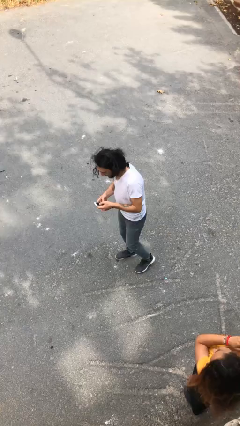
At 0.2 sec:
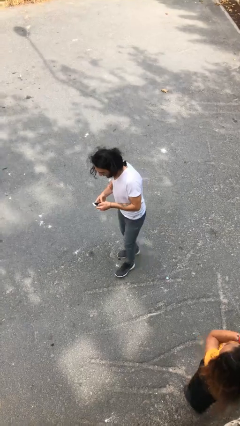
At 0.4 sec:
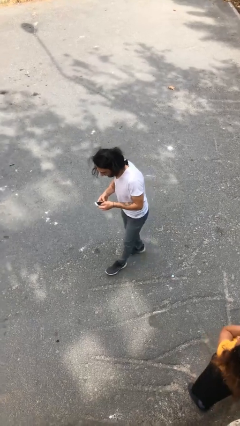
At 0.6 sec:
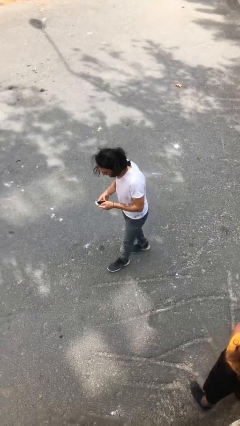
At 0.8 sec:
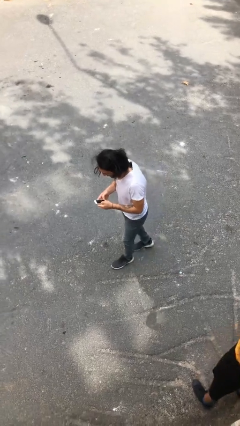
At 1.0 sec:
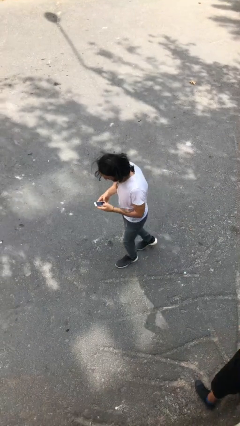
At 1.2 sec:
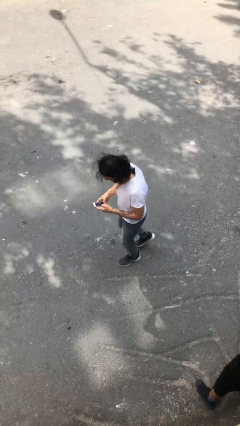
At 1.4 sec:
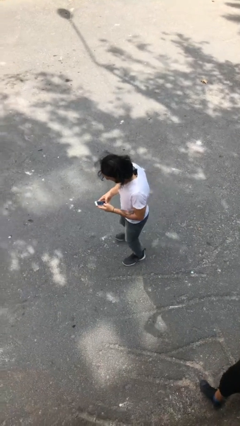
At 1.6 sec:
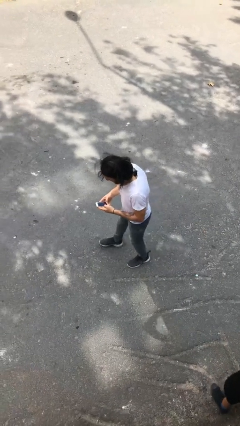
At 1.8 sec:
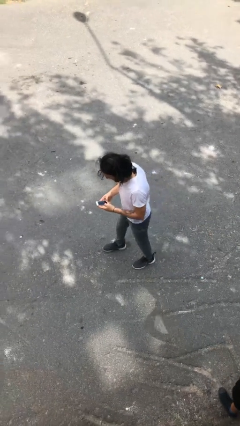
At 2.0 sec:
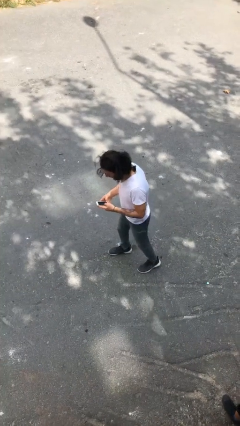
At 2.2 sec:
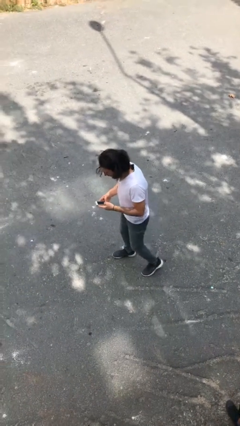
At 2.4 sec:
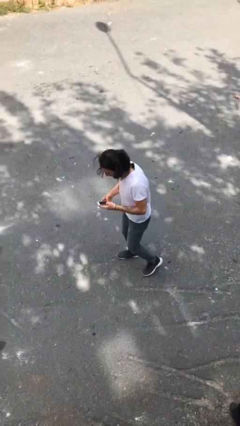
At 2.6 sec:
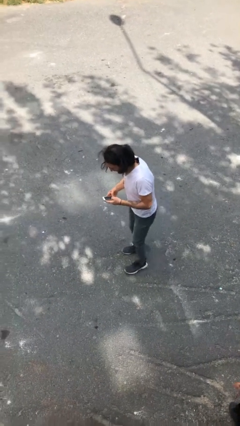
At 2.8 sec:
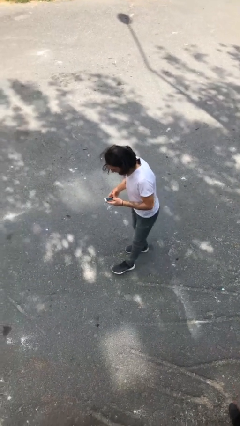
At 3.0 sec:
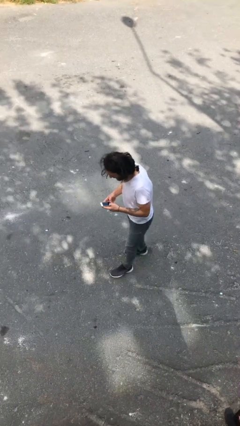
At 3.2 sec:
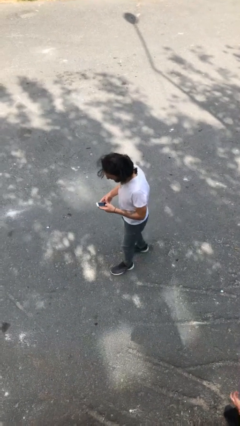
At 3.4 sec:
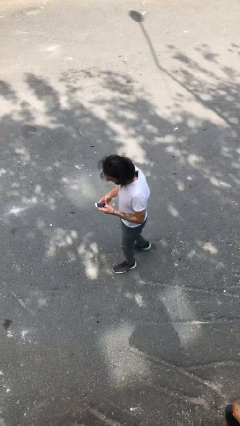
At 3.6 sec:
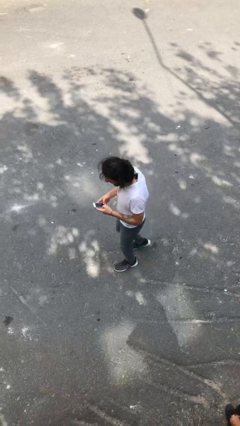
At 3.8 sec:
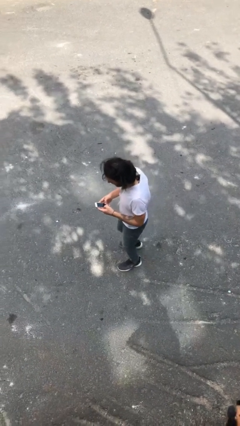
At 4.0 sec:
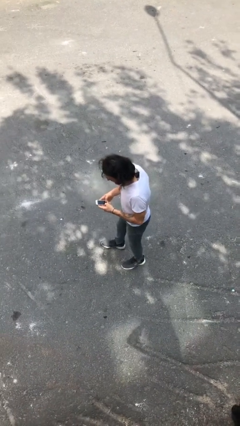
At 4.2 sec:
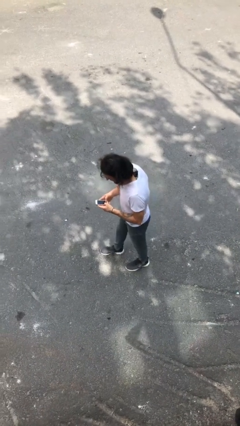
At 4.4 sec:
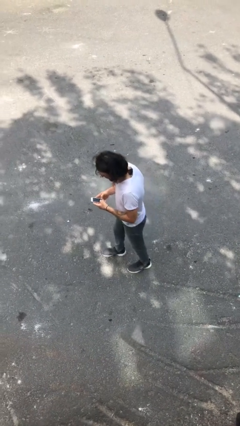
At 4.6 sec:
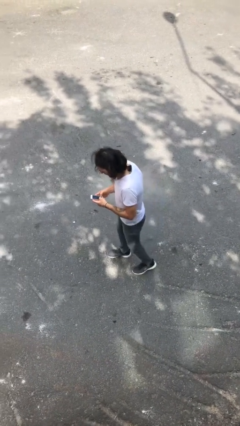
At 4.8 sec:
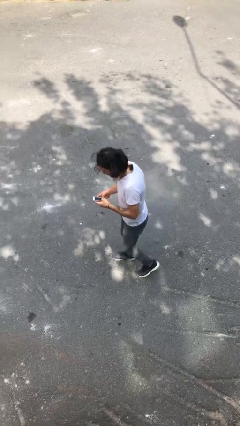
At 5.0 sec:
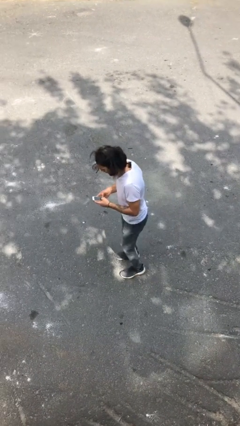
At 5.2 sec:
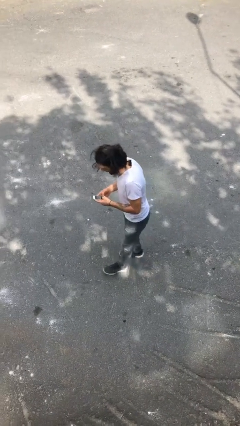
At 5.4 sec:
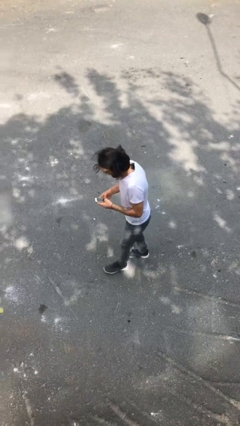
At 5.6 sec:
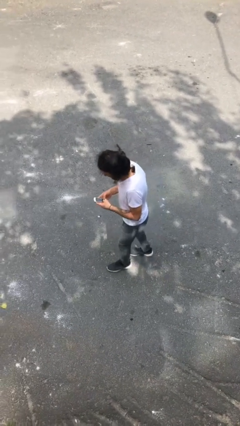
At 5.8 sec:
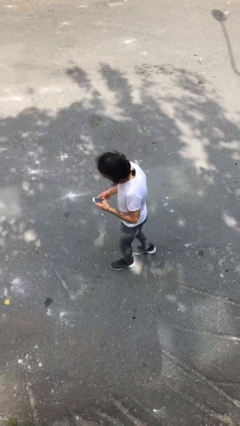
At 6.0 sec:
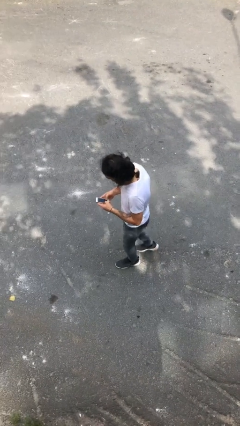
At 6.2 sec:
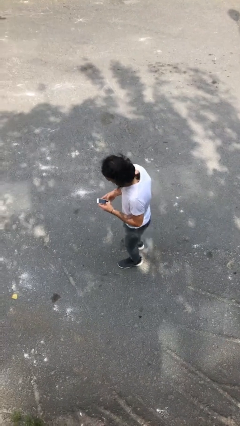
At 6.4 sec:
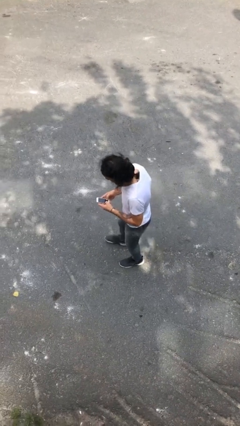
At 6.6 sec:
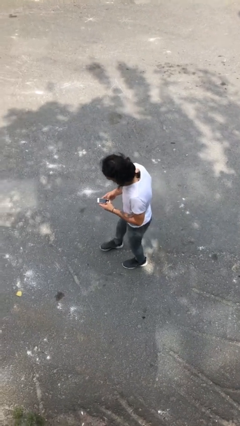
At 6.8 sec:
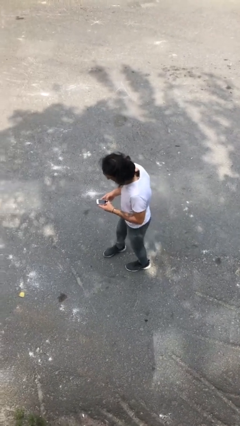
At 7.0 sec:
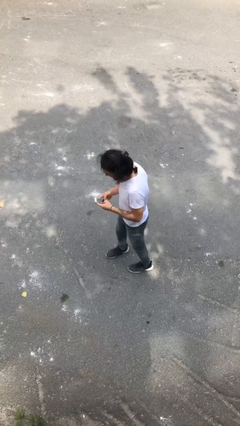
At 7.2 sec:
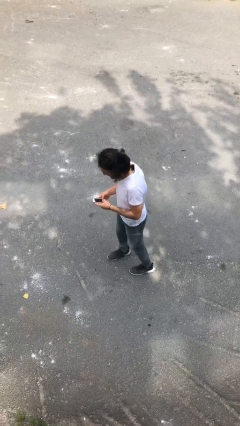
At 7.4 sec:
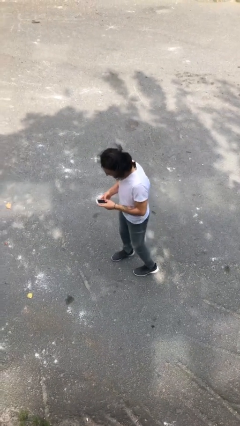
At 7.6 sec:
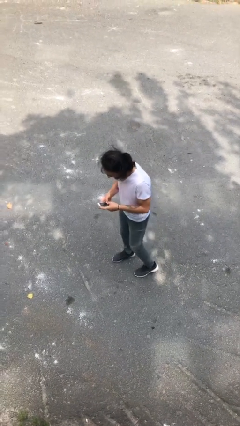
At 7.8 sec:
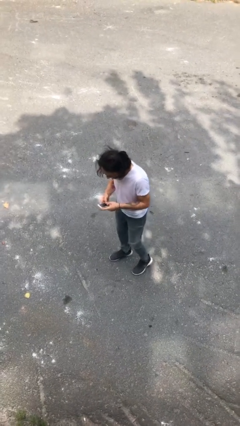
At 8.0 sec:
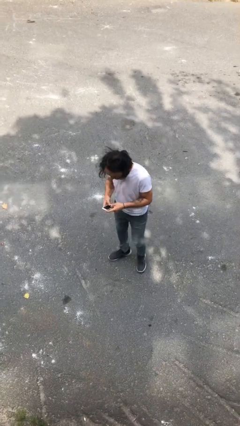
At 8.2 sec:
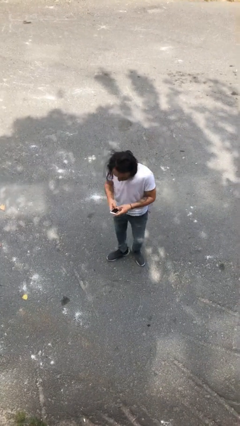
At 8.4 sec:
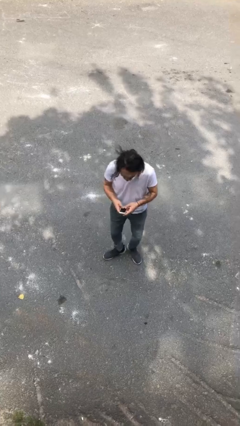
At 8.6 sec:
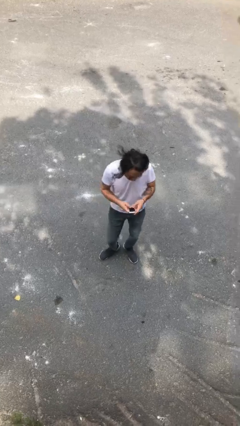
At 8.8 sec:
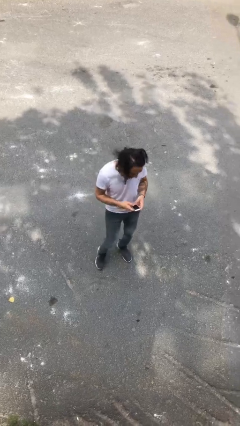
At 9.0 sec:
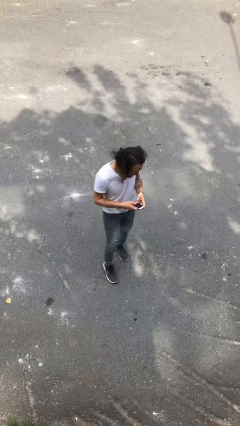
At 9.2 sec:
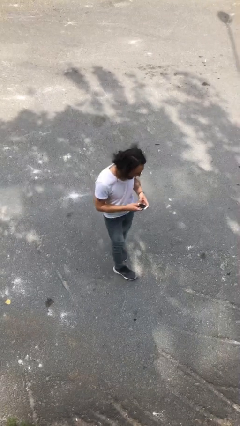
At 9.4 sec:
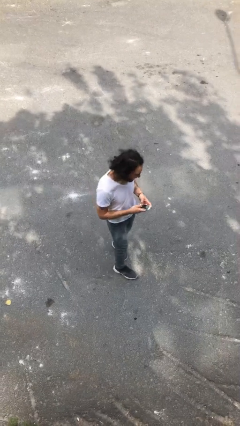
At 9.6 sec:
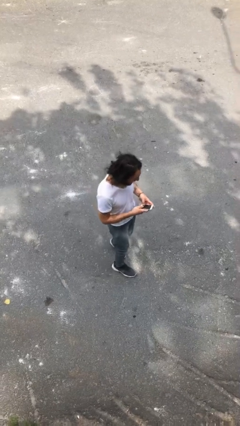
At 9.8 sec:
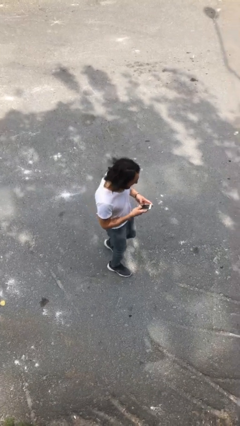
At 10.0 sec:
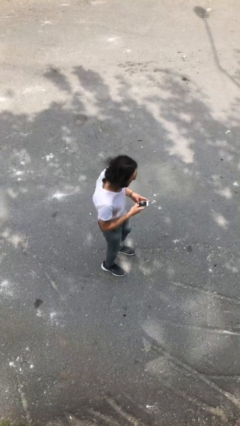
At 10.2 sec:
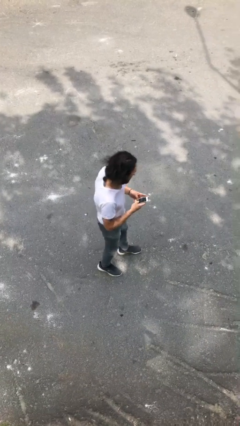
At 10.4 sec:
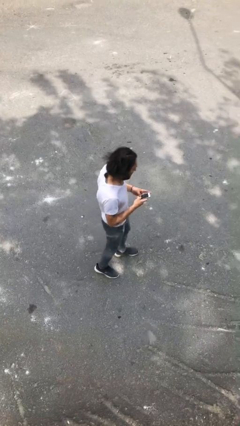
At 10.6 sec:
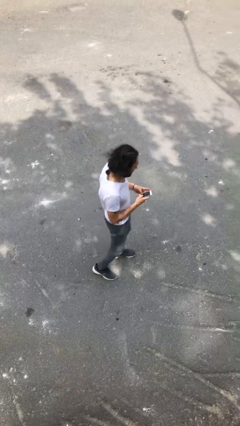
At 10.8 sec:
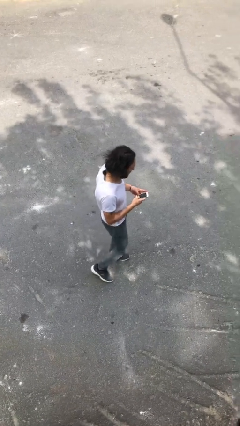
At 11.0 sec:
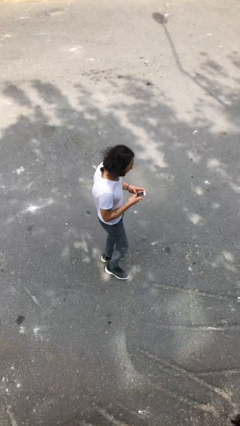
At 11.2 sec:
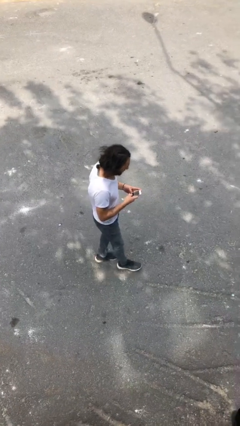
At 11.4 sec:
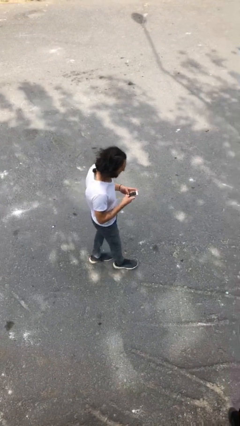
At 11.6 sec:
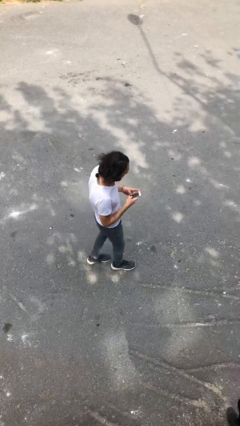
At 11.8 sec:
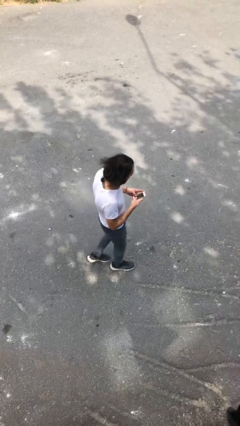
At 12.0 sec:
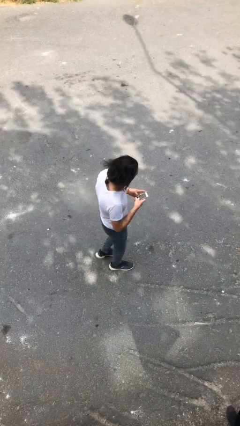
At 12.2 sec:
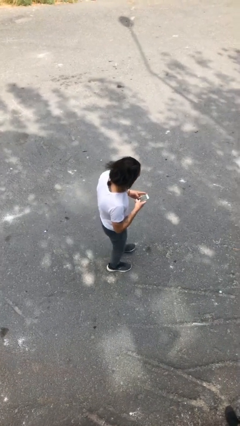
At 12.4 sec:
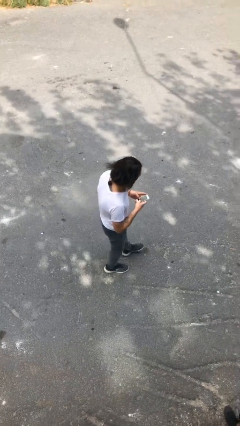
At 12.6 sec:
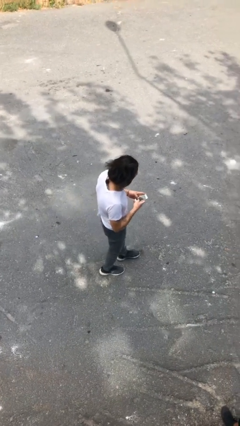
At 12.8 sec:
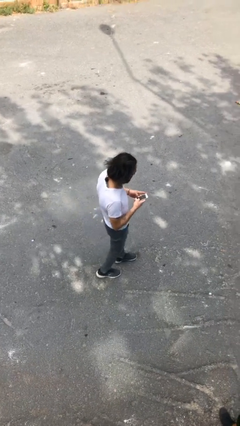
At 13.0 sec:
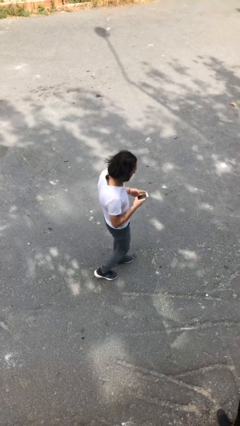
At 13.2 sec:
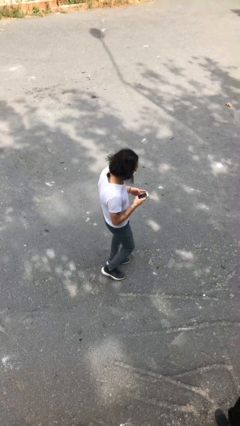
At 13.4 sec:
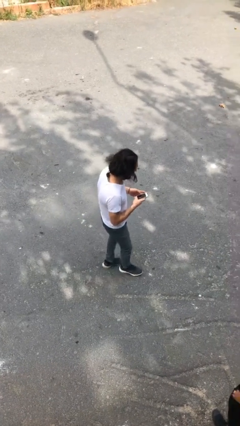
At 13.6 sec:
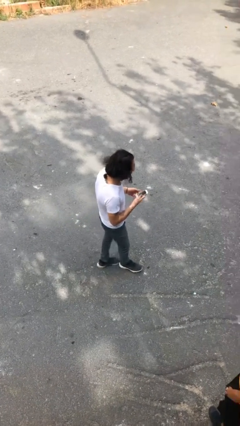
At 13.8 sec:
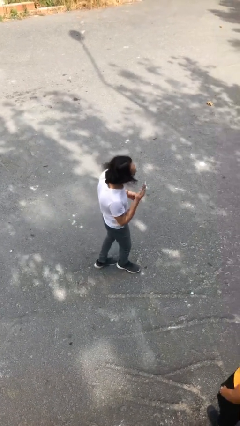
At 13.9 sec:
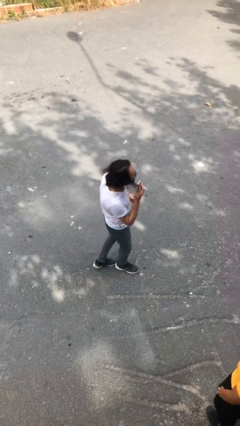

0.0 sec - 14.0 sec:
person texts on phone

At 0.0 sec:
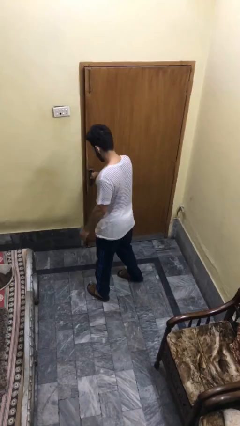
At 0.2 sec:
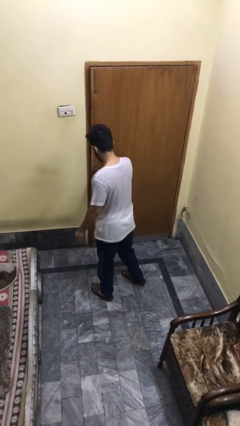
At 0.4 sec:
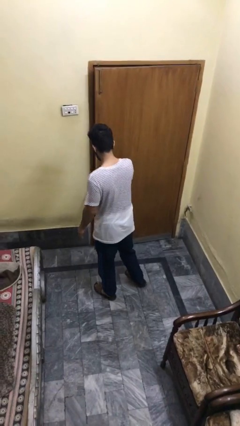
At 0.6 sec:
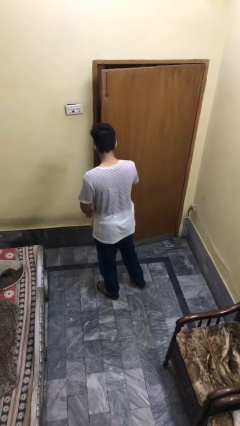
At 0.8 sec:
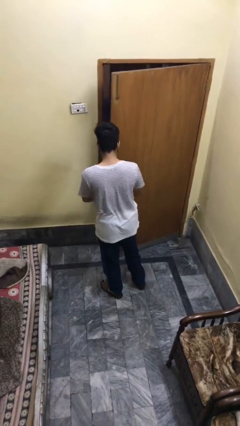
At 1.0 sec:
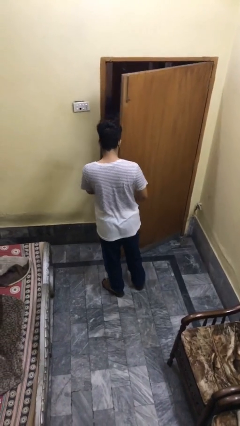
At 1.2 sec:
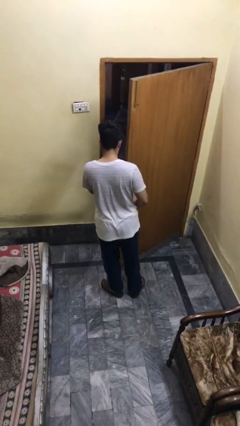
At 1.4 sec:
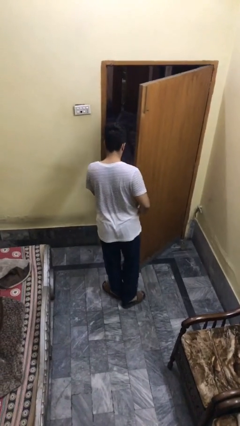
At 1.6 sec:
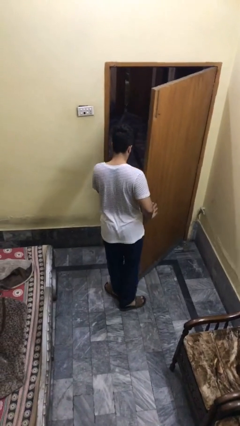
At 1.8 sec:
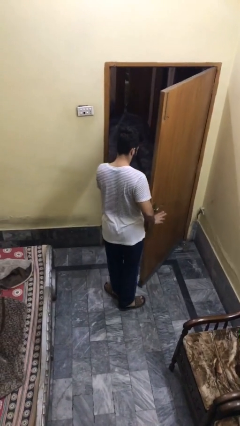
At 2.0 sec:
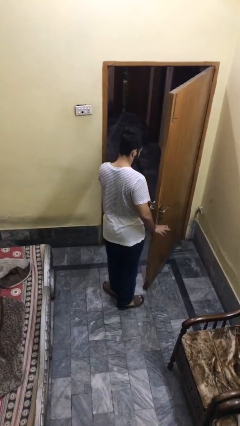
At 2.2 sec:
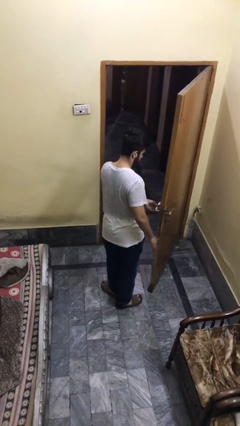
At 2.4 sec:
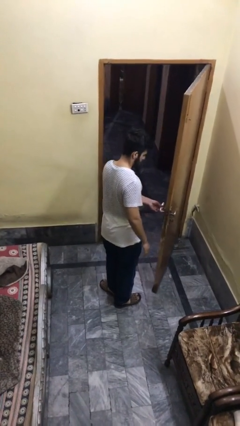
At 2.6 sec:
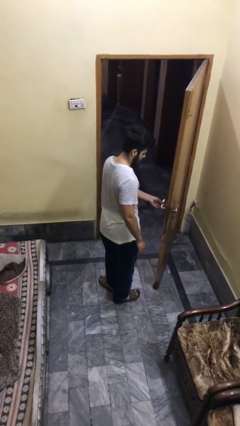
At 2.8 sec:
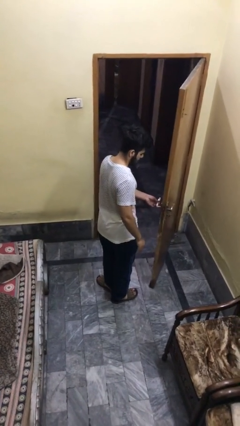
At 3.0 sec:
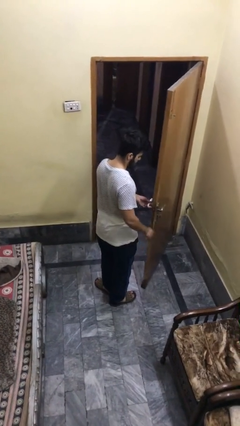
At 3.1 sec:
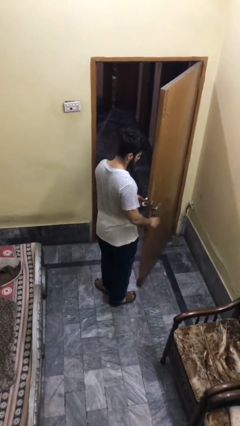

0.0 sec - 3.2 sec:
person opens facility door

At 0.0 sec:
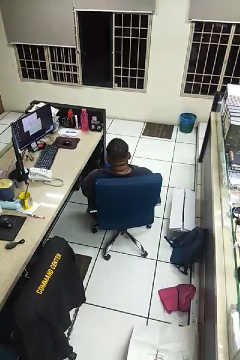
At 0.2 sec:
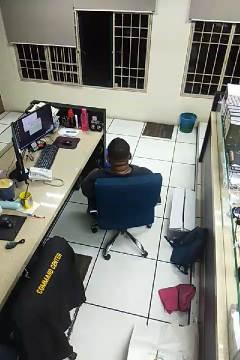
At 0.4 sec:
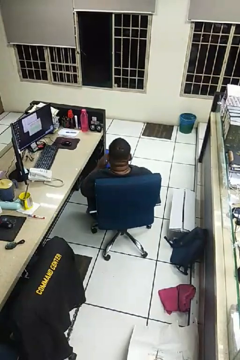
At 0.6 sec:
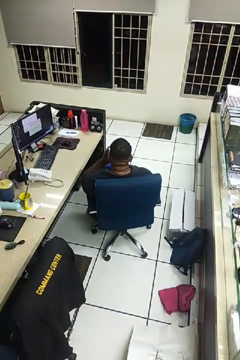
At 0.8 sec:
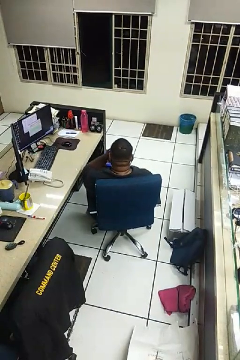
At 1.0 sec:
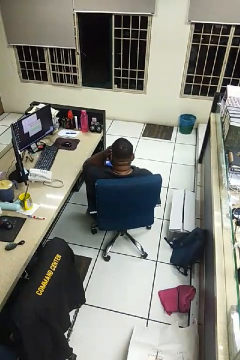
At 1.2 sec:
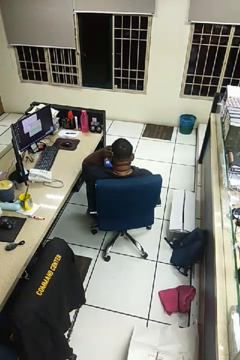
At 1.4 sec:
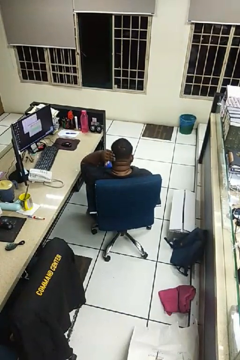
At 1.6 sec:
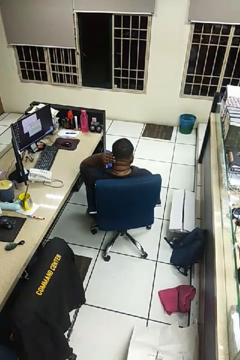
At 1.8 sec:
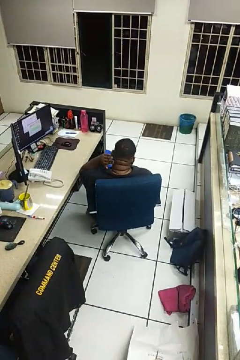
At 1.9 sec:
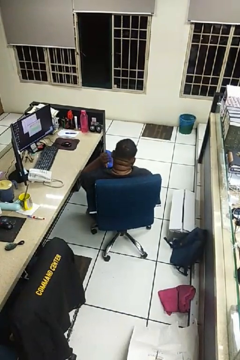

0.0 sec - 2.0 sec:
person strokes hair
